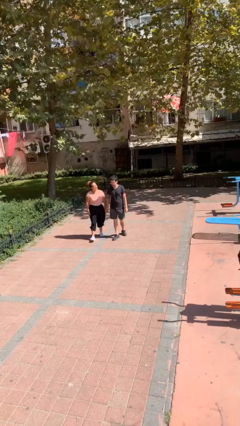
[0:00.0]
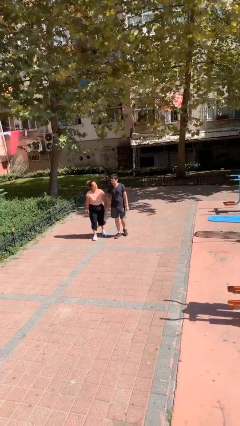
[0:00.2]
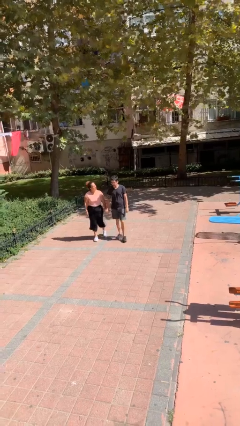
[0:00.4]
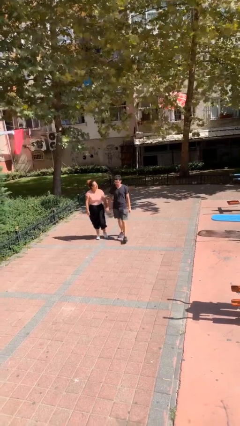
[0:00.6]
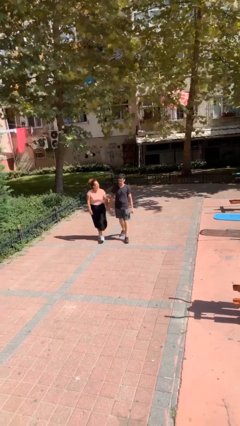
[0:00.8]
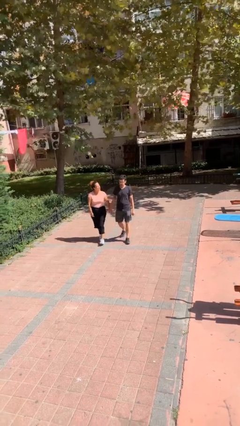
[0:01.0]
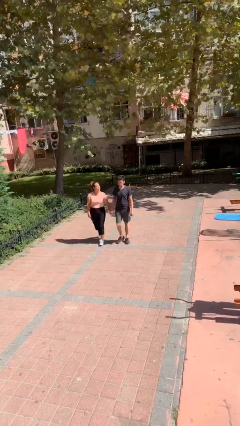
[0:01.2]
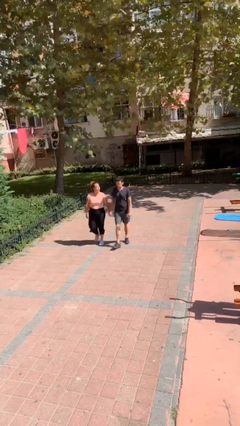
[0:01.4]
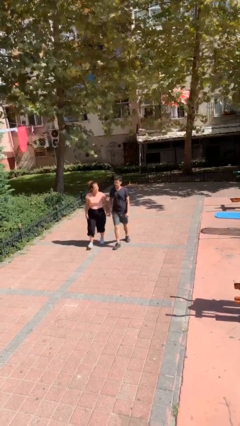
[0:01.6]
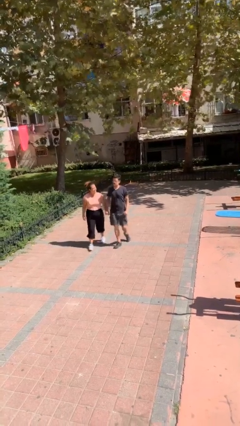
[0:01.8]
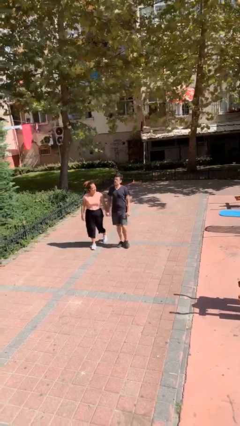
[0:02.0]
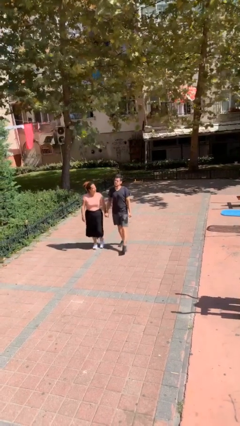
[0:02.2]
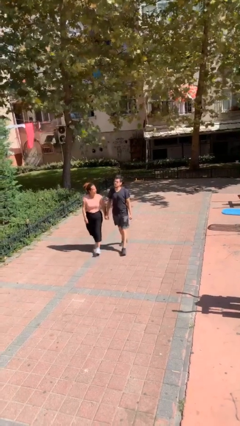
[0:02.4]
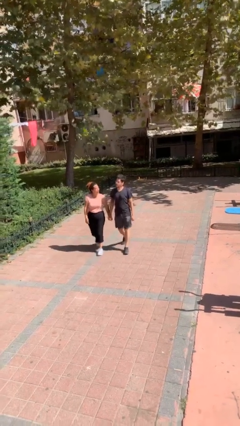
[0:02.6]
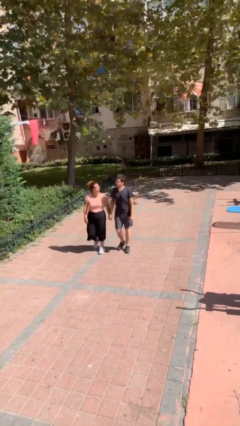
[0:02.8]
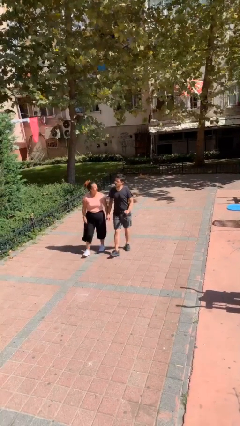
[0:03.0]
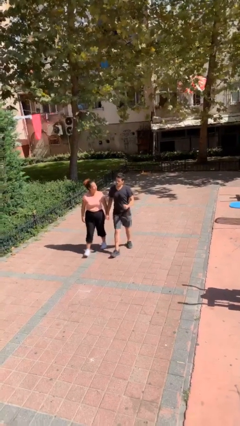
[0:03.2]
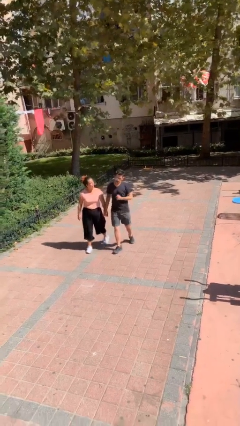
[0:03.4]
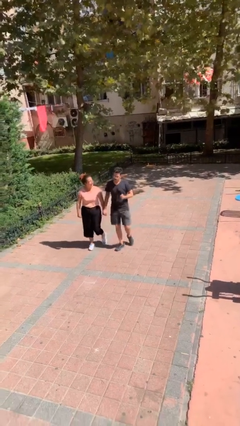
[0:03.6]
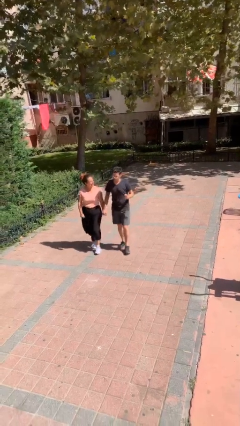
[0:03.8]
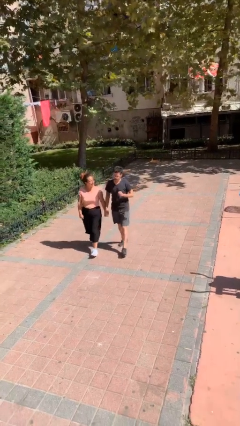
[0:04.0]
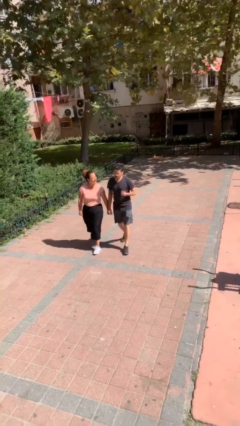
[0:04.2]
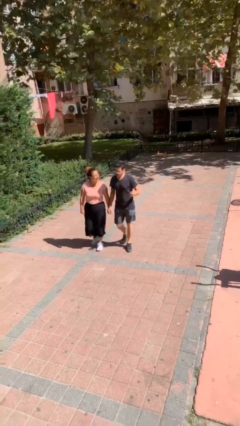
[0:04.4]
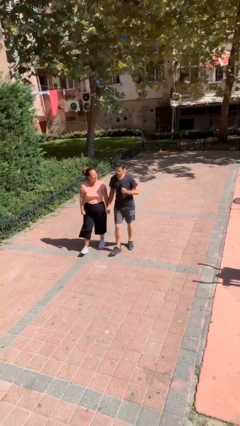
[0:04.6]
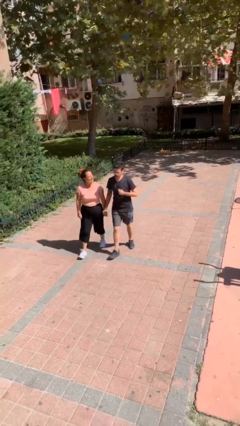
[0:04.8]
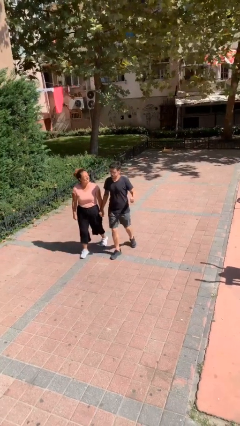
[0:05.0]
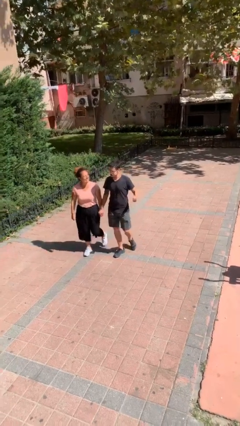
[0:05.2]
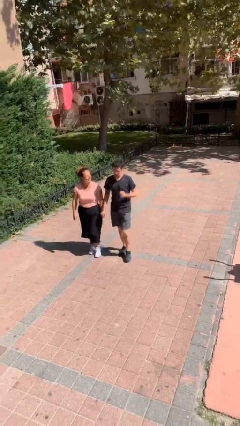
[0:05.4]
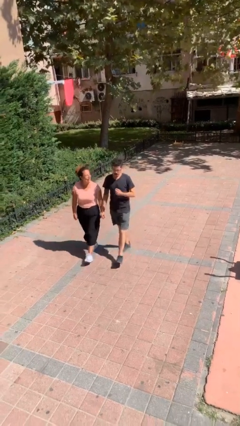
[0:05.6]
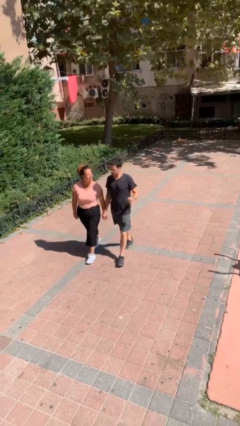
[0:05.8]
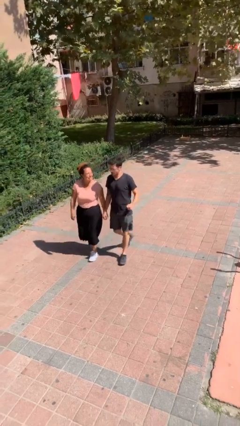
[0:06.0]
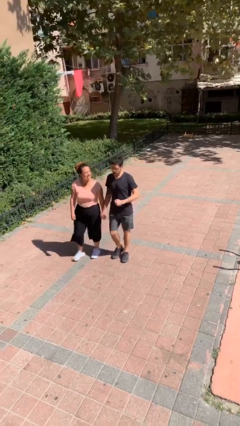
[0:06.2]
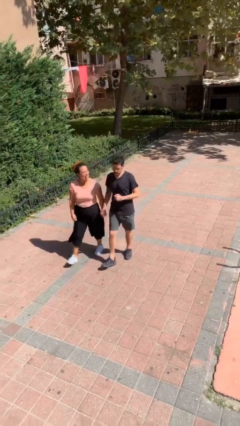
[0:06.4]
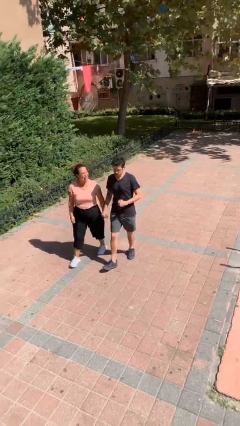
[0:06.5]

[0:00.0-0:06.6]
person holds hand

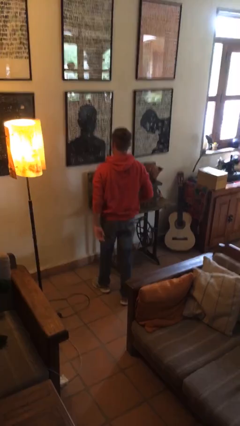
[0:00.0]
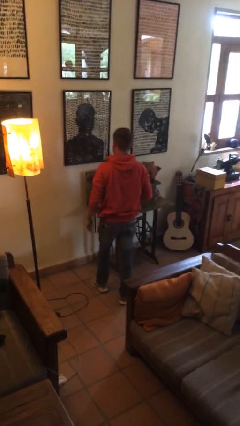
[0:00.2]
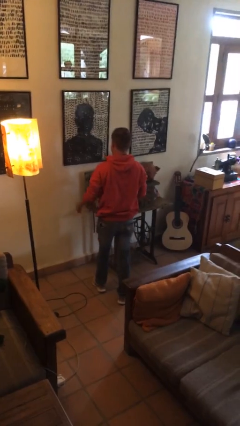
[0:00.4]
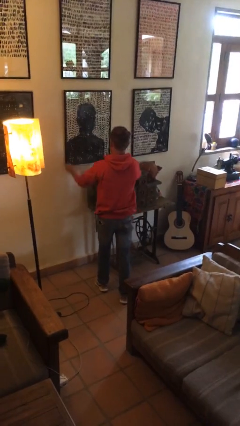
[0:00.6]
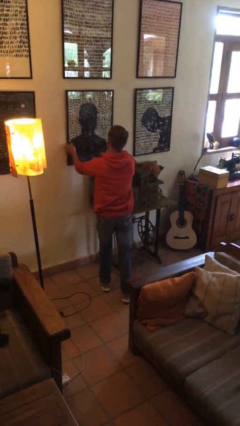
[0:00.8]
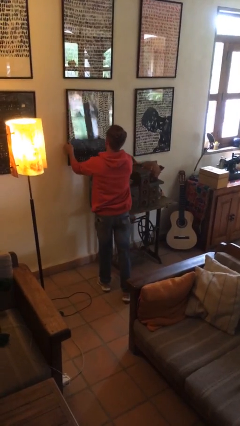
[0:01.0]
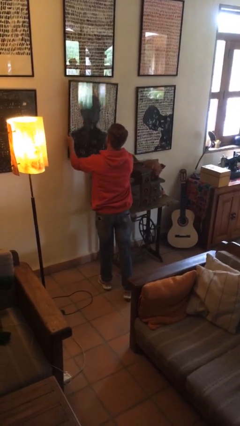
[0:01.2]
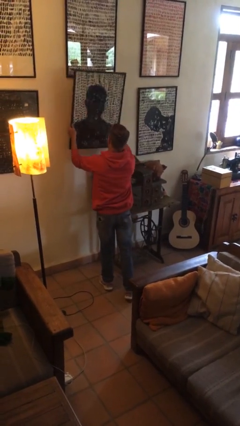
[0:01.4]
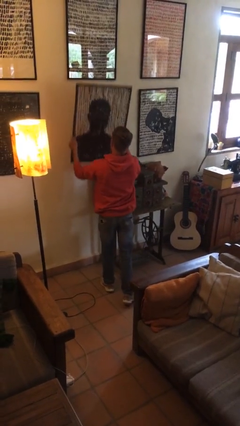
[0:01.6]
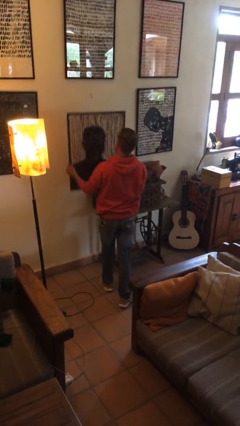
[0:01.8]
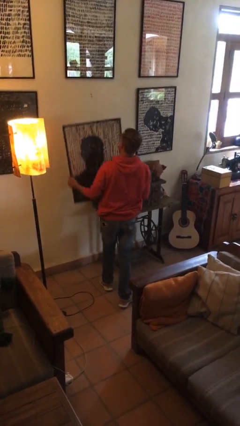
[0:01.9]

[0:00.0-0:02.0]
person takes down picture frame

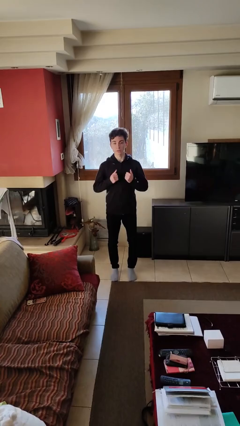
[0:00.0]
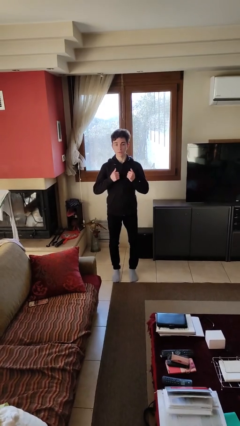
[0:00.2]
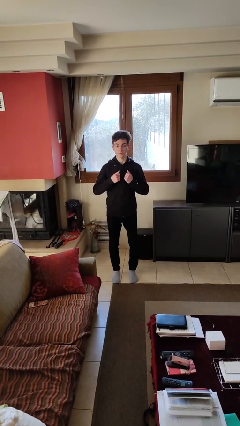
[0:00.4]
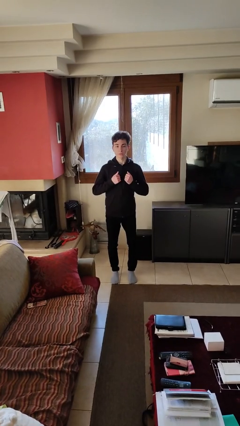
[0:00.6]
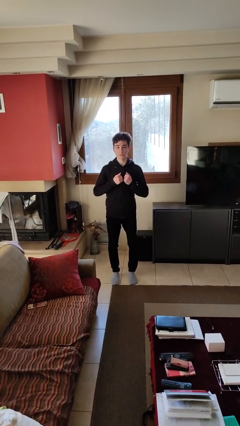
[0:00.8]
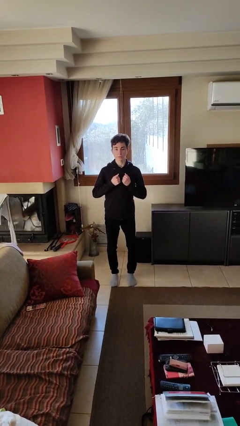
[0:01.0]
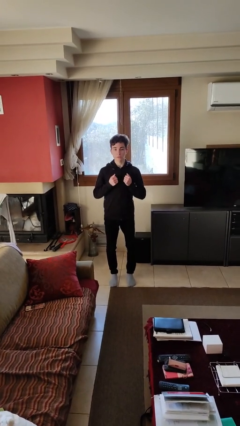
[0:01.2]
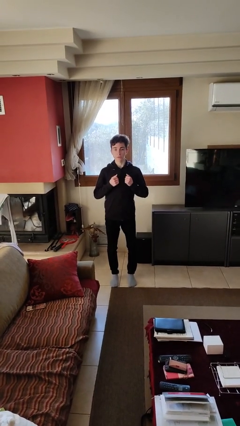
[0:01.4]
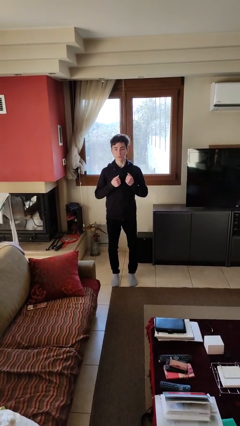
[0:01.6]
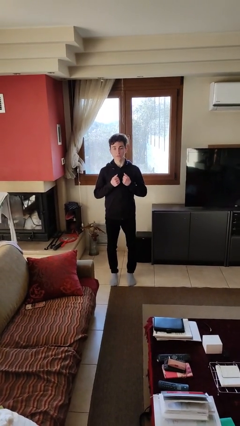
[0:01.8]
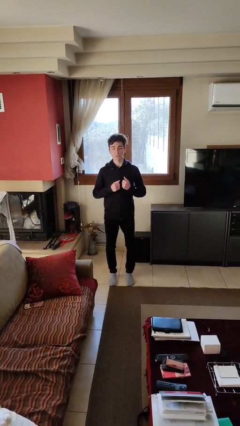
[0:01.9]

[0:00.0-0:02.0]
person drums on chest

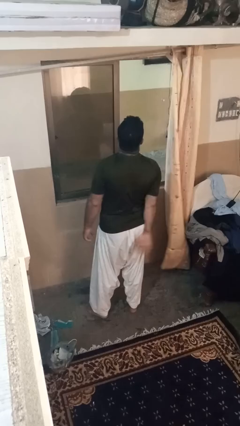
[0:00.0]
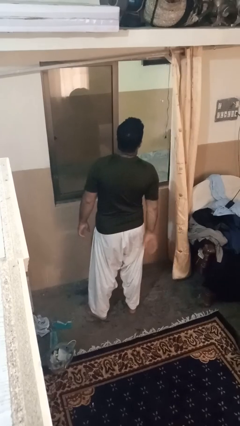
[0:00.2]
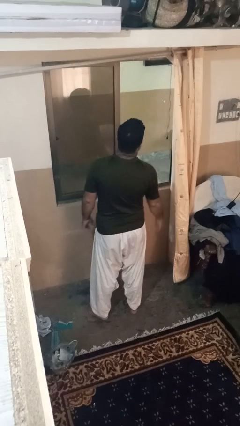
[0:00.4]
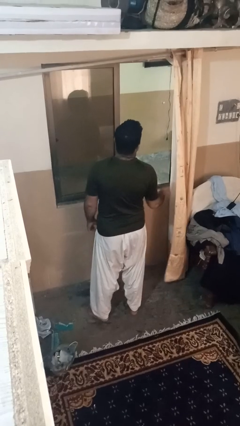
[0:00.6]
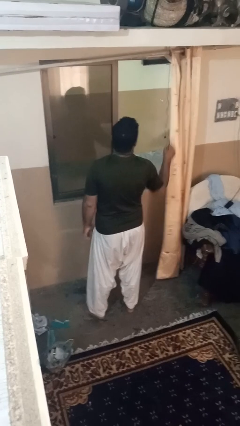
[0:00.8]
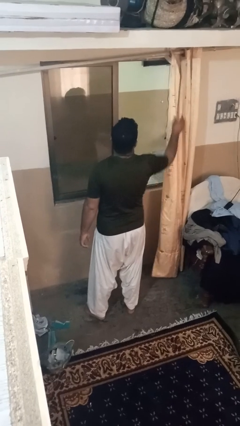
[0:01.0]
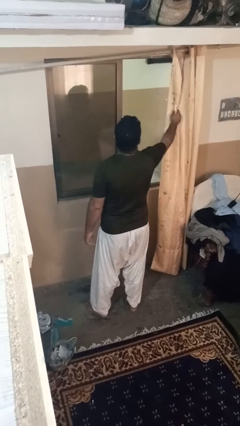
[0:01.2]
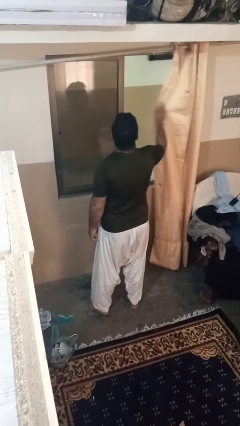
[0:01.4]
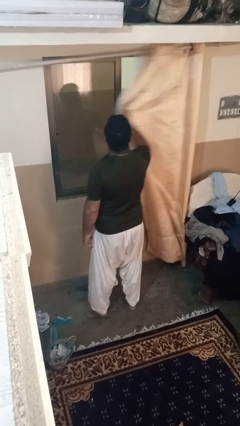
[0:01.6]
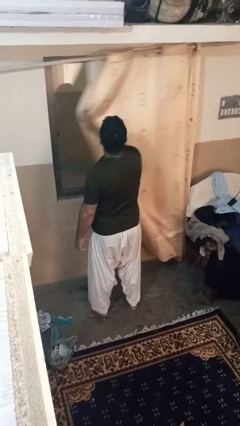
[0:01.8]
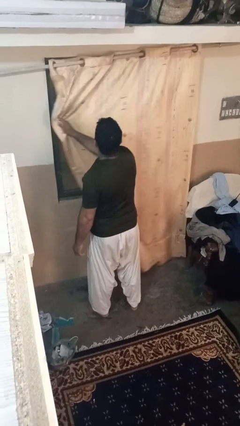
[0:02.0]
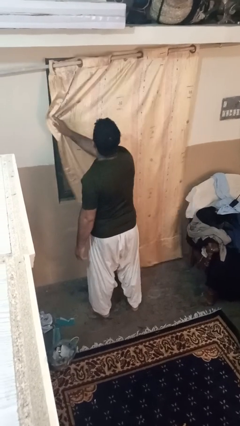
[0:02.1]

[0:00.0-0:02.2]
person closes curtains

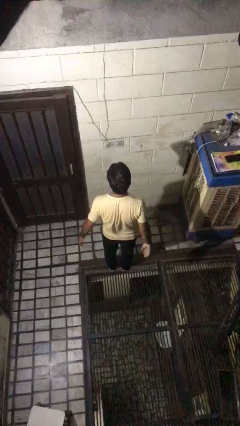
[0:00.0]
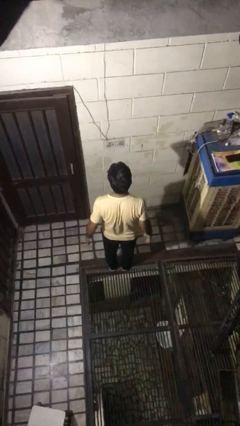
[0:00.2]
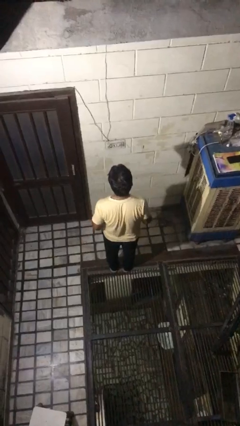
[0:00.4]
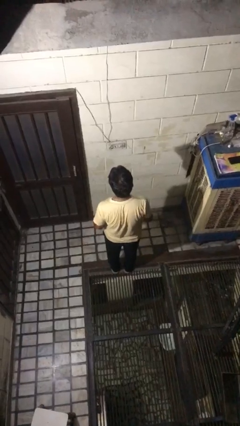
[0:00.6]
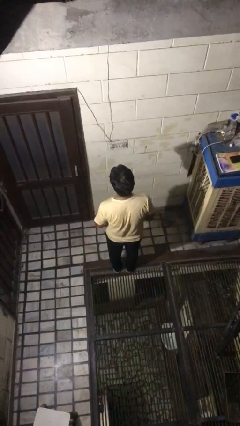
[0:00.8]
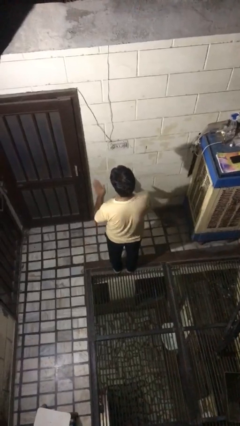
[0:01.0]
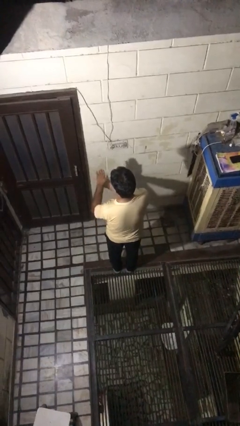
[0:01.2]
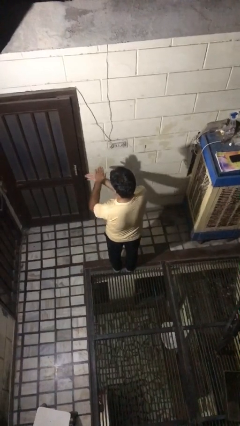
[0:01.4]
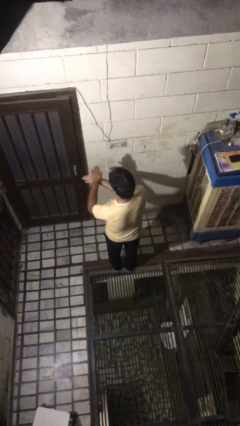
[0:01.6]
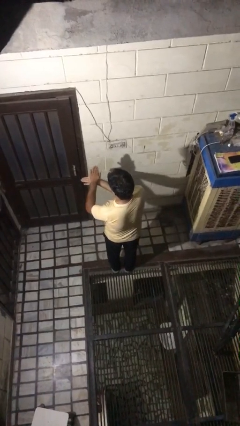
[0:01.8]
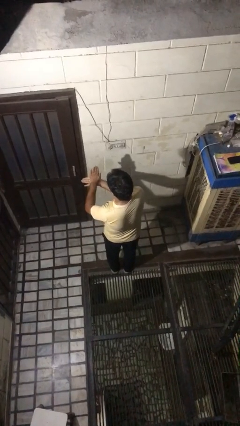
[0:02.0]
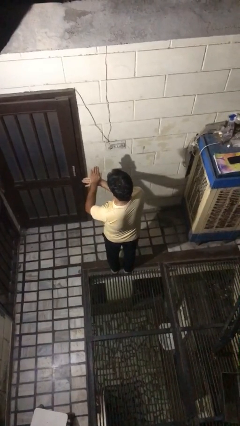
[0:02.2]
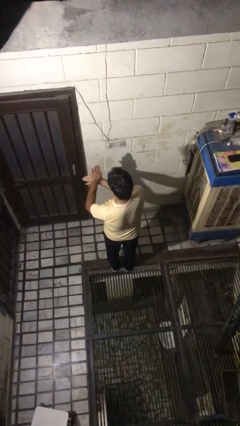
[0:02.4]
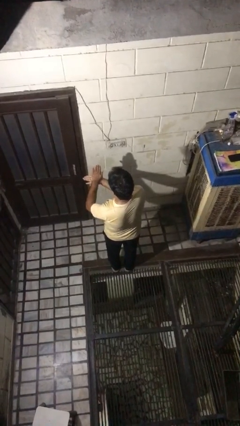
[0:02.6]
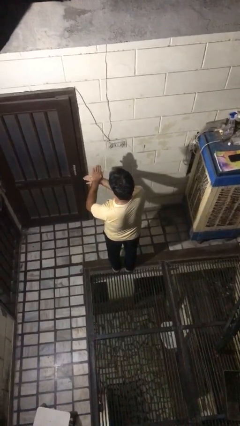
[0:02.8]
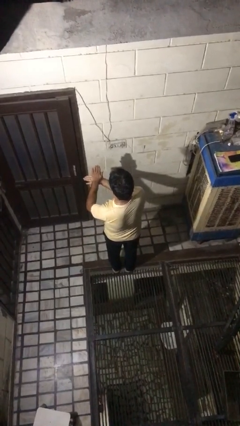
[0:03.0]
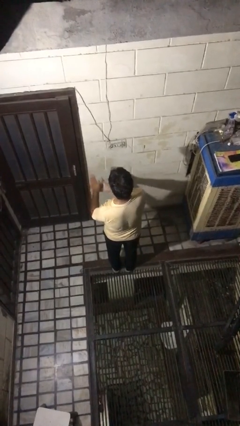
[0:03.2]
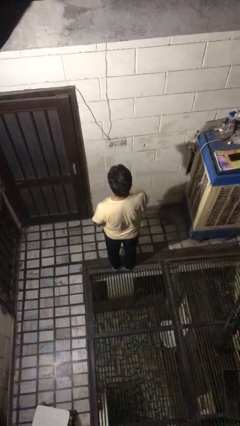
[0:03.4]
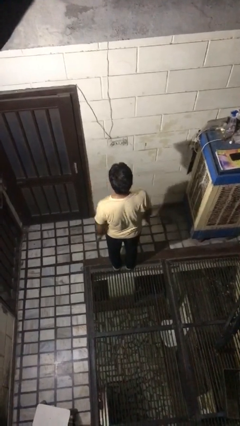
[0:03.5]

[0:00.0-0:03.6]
person gestures number five

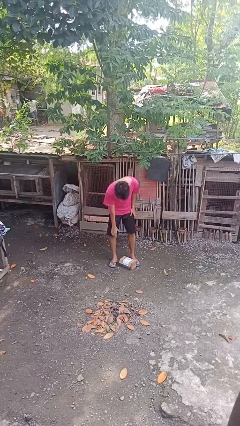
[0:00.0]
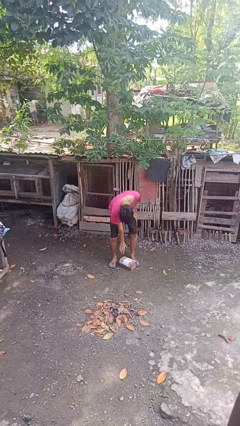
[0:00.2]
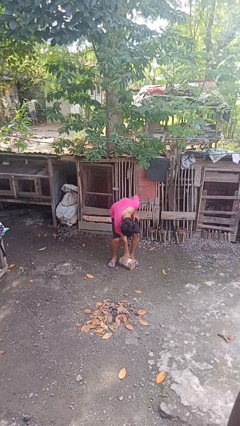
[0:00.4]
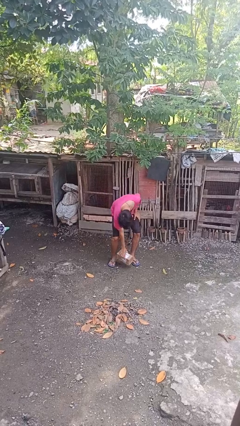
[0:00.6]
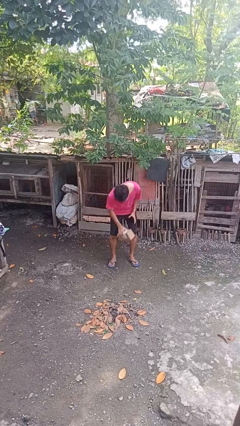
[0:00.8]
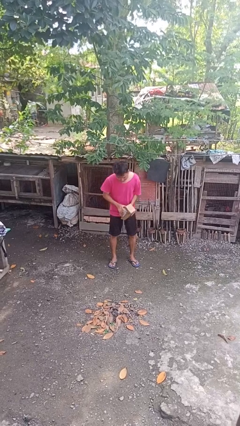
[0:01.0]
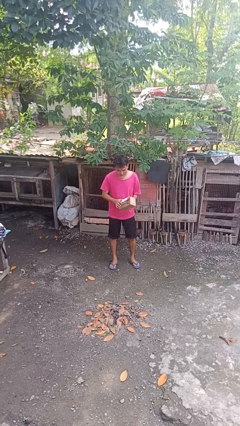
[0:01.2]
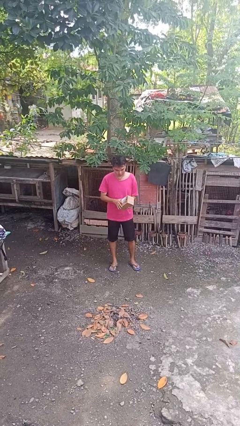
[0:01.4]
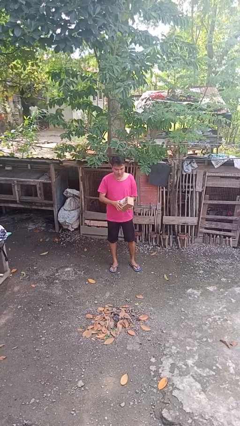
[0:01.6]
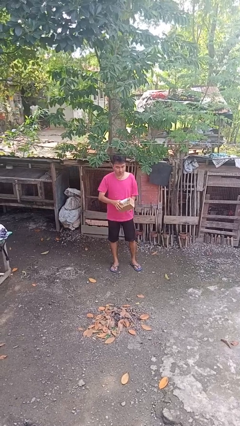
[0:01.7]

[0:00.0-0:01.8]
person picks up object from floor
